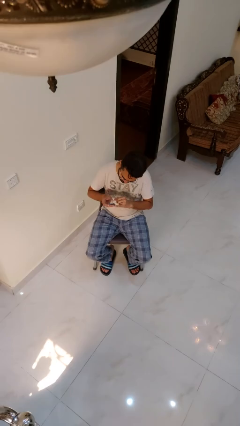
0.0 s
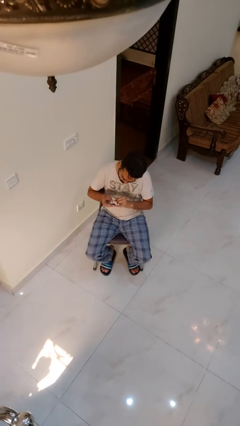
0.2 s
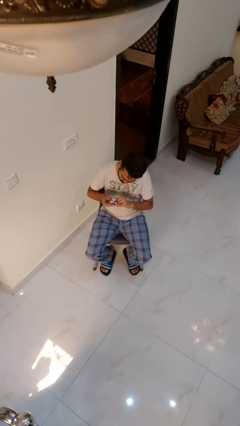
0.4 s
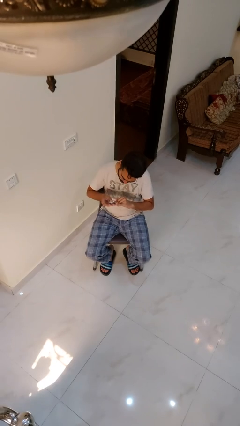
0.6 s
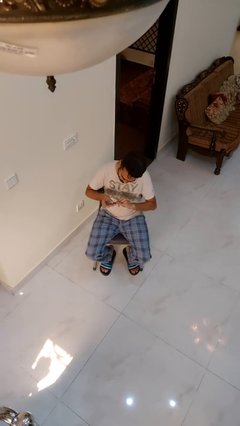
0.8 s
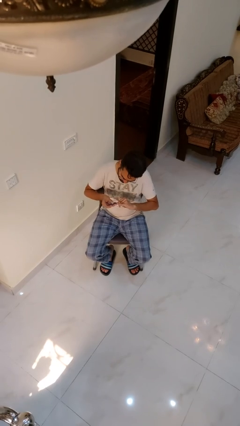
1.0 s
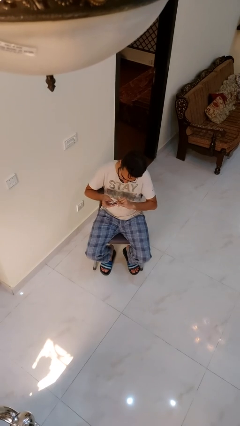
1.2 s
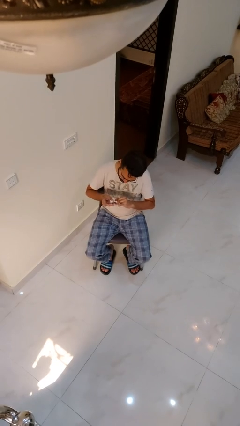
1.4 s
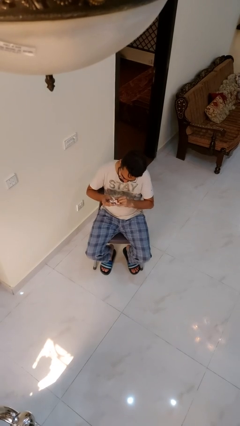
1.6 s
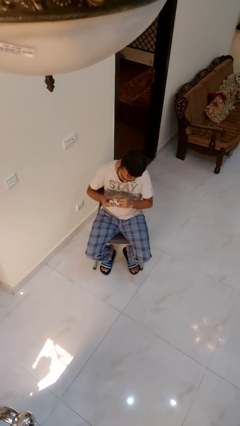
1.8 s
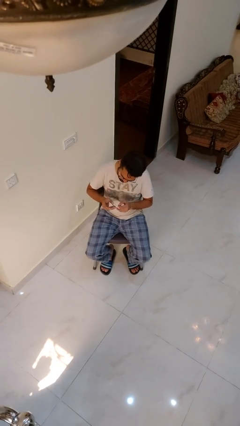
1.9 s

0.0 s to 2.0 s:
person clips fingernails

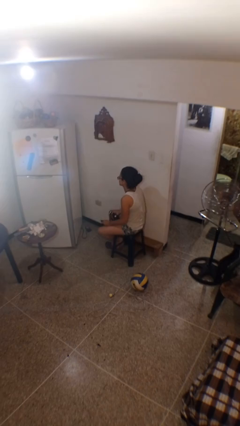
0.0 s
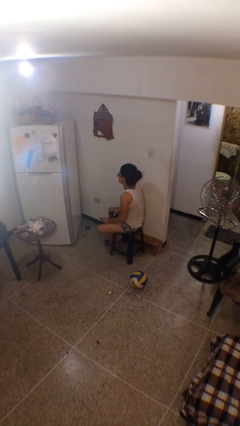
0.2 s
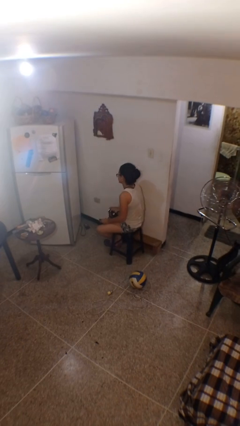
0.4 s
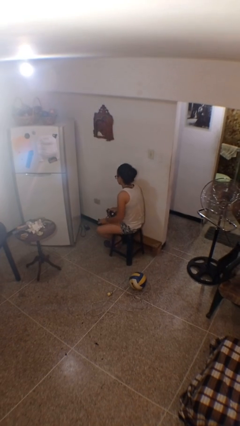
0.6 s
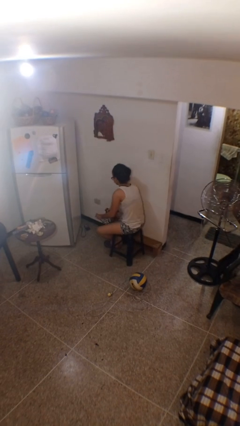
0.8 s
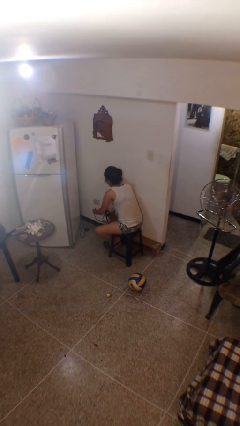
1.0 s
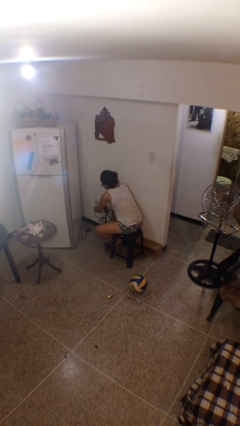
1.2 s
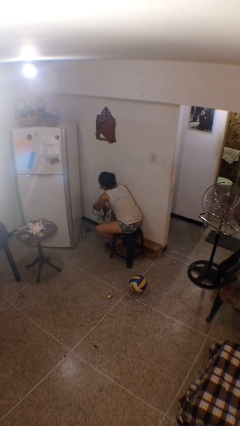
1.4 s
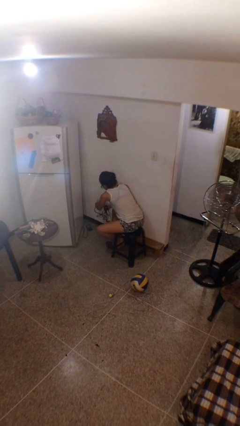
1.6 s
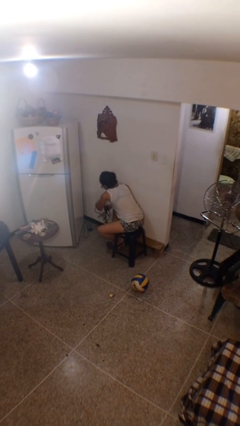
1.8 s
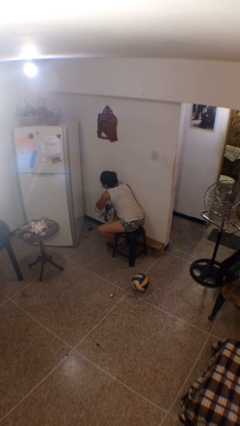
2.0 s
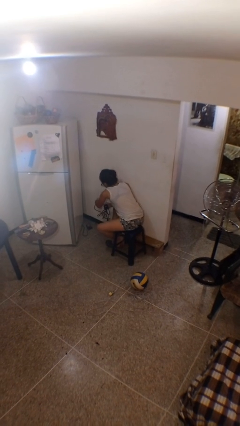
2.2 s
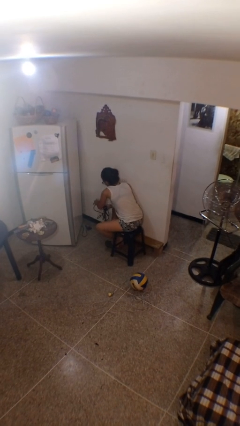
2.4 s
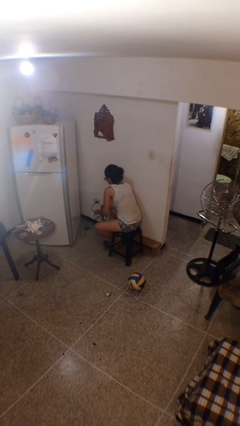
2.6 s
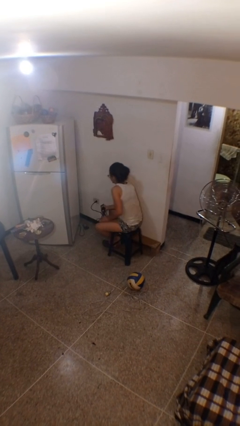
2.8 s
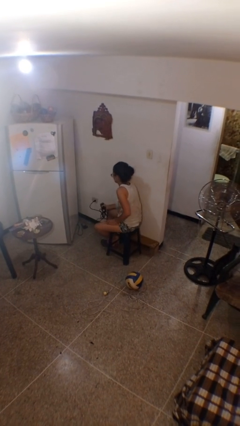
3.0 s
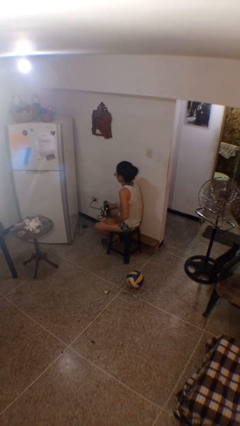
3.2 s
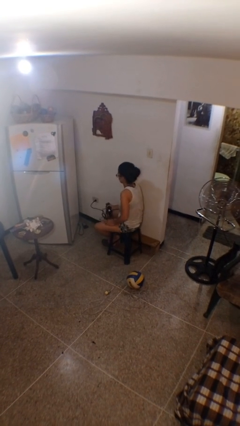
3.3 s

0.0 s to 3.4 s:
person plugs into electrical socket

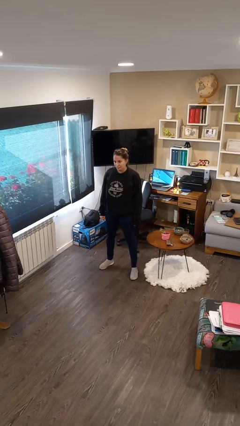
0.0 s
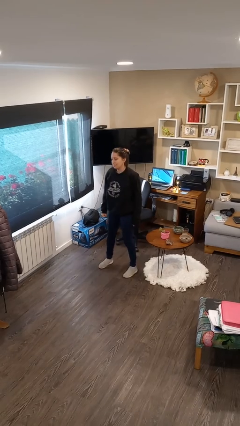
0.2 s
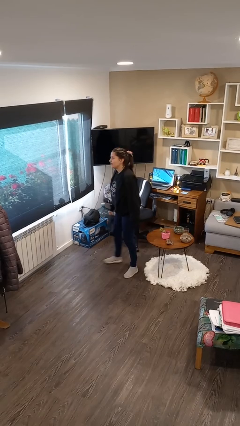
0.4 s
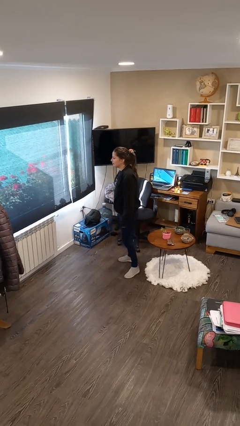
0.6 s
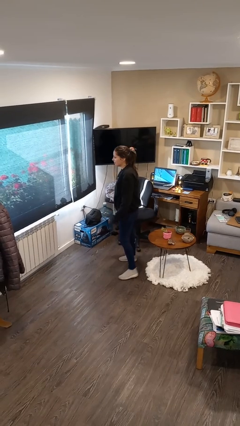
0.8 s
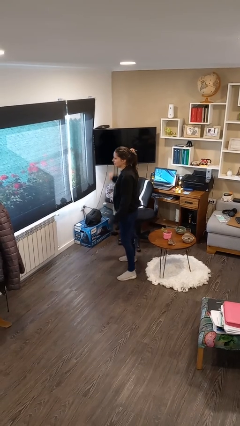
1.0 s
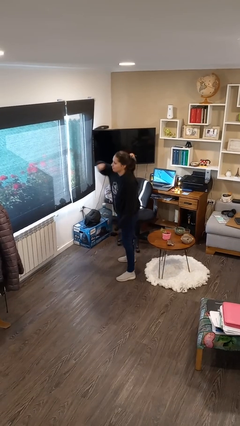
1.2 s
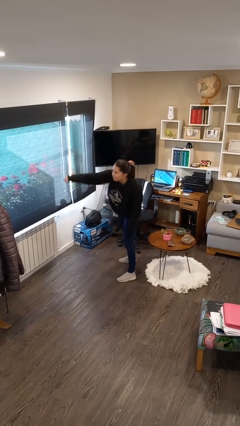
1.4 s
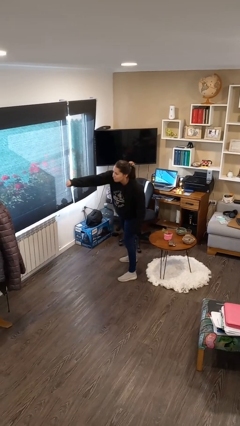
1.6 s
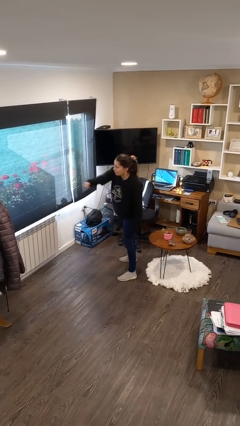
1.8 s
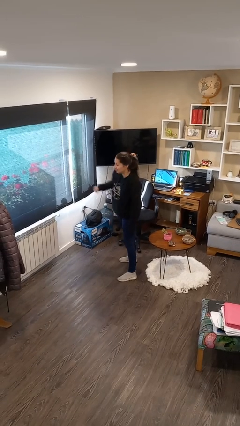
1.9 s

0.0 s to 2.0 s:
person punches

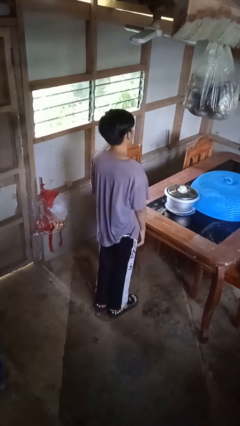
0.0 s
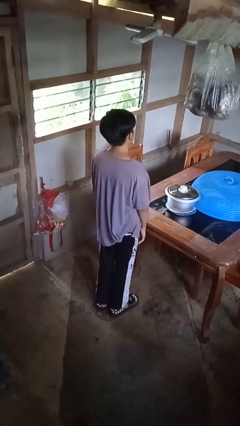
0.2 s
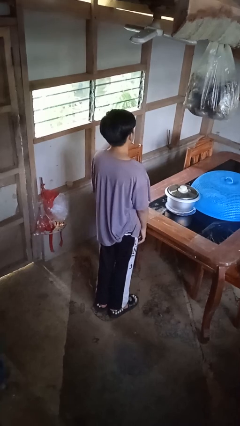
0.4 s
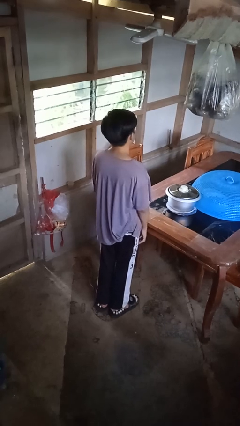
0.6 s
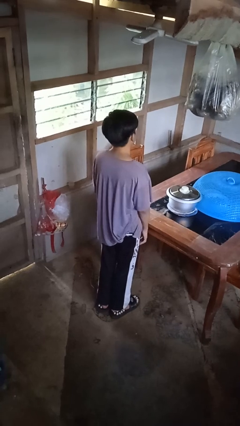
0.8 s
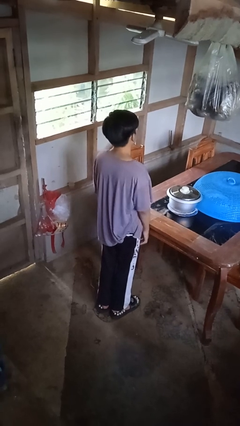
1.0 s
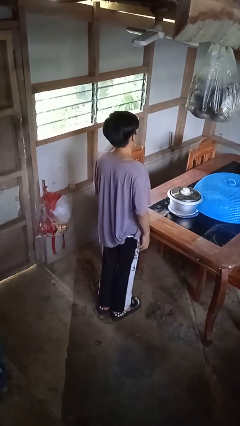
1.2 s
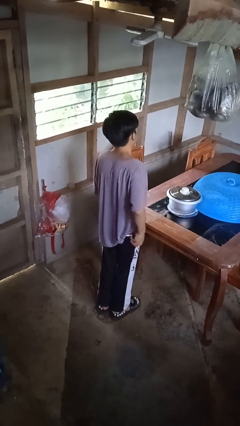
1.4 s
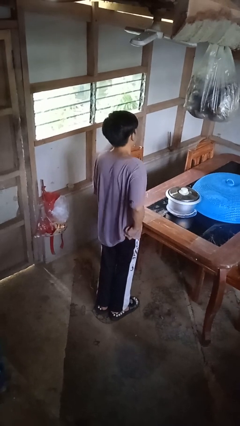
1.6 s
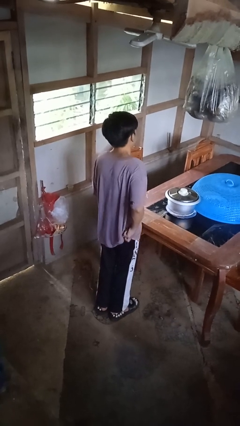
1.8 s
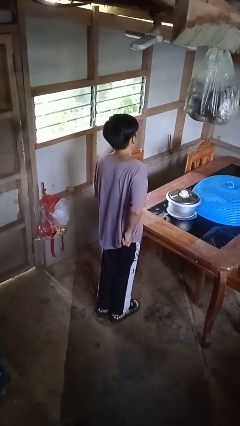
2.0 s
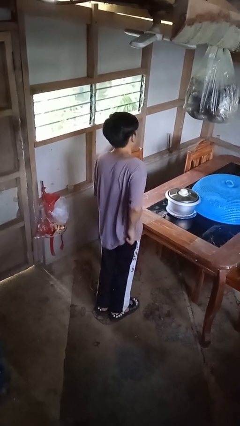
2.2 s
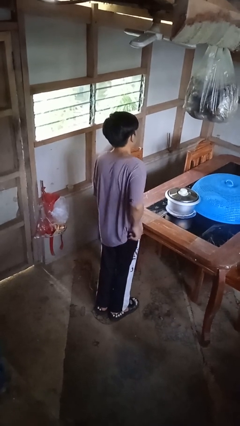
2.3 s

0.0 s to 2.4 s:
person takes phone from pocket

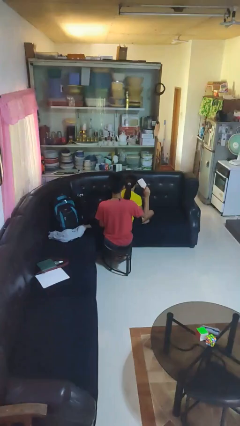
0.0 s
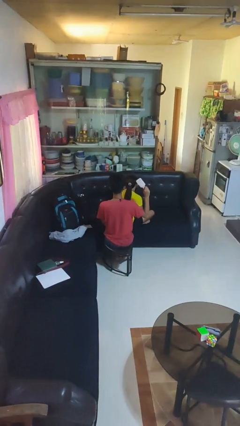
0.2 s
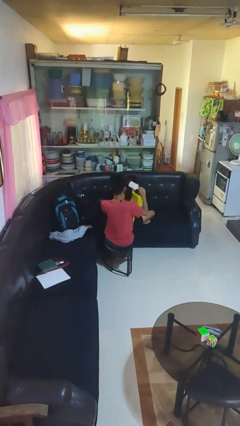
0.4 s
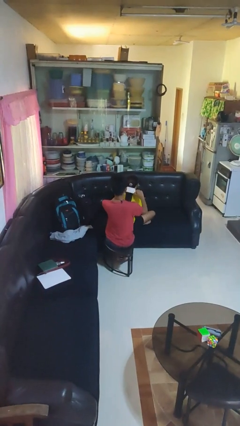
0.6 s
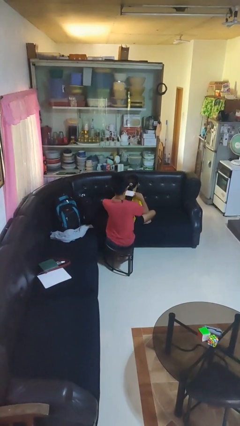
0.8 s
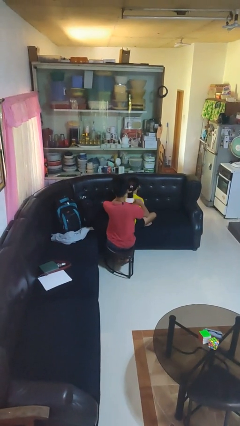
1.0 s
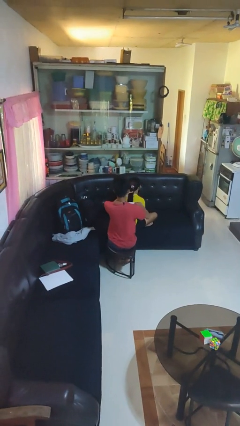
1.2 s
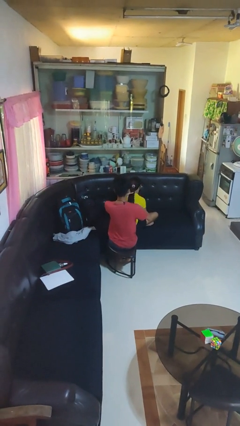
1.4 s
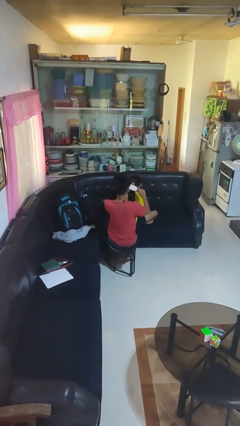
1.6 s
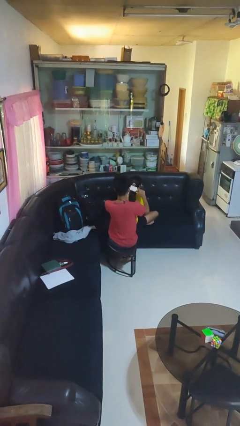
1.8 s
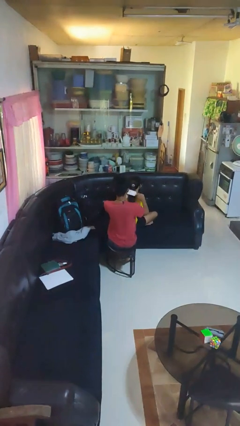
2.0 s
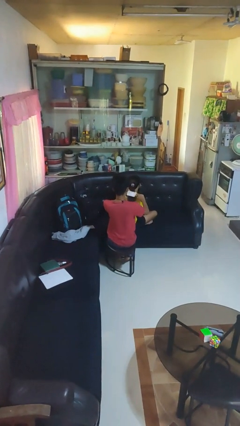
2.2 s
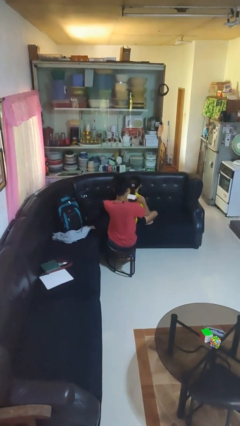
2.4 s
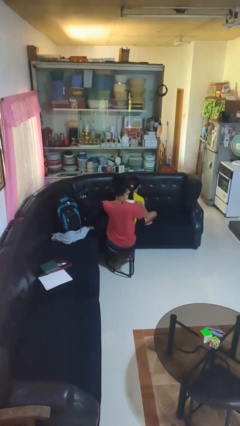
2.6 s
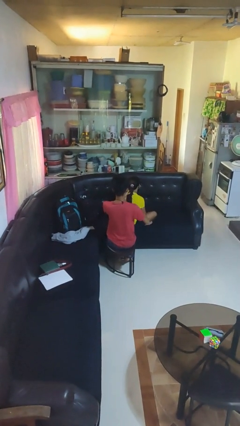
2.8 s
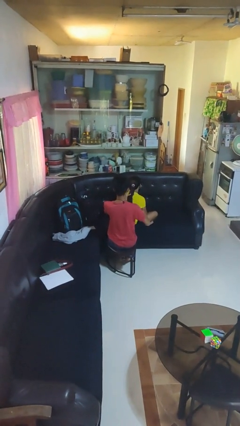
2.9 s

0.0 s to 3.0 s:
person brushes hair of person

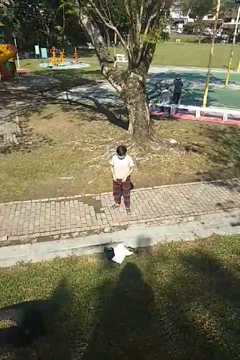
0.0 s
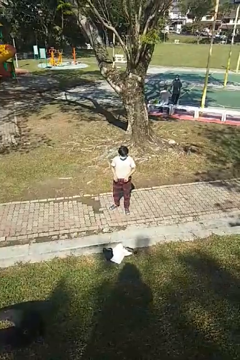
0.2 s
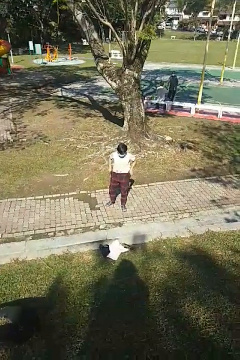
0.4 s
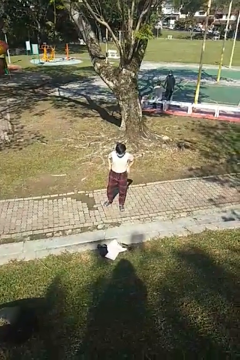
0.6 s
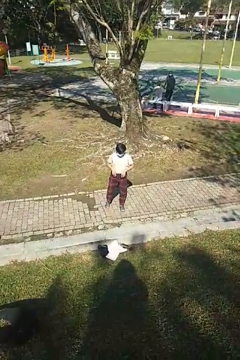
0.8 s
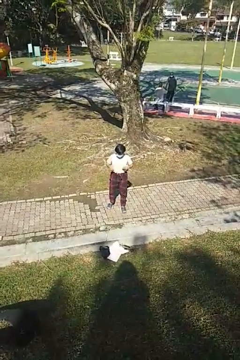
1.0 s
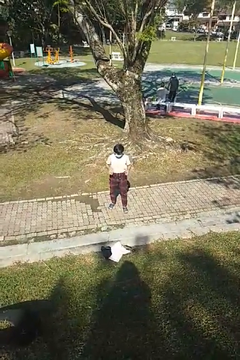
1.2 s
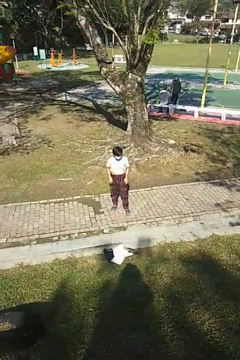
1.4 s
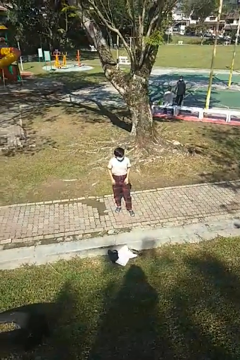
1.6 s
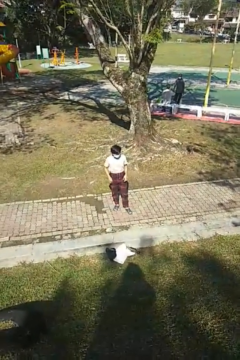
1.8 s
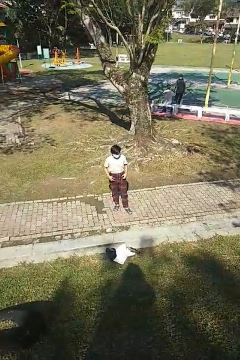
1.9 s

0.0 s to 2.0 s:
person hikes up pants

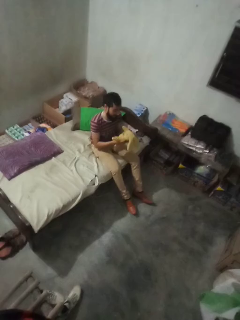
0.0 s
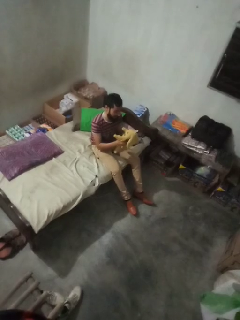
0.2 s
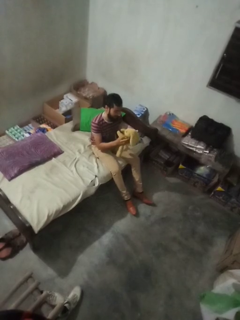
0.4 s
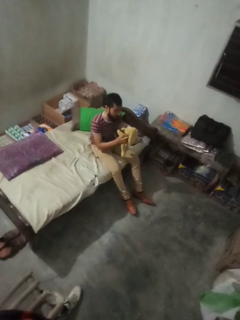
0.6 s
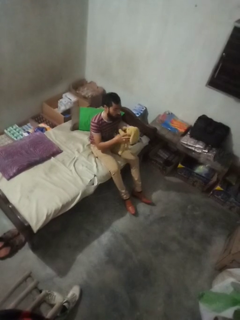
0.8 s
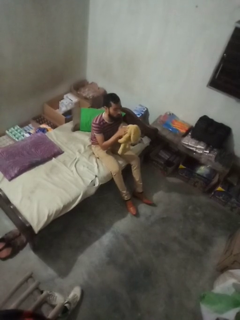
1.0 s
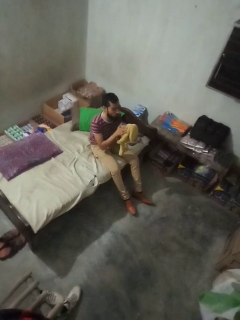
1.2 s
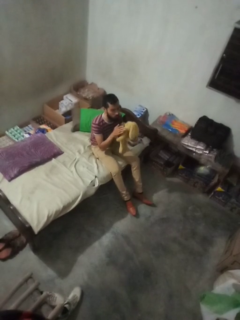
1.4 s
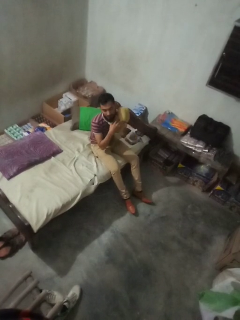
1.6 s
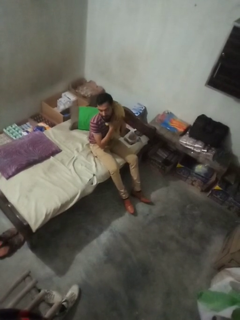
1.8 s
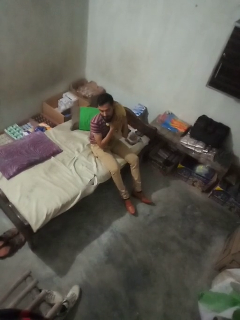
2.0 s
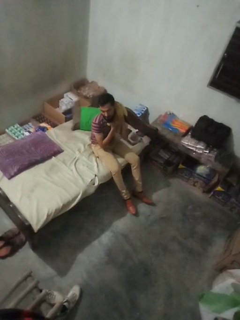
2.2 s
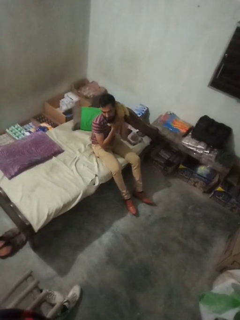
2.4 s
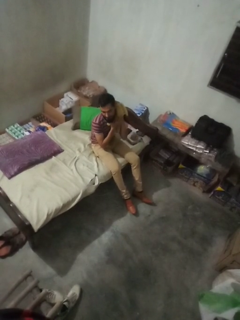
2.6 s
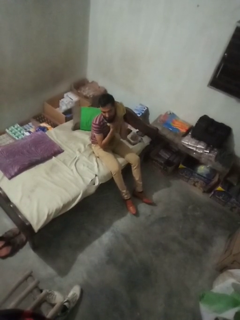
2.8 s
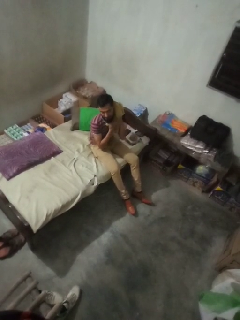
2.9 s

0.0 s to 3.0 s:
person hugs stuffed animal

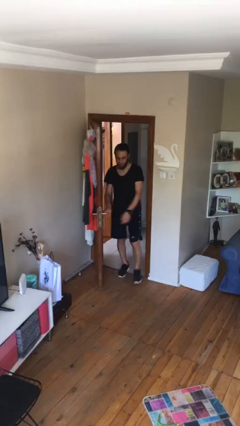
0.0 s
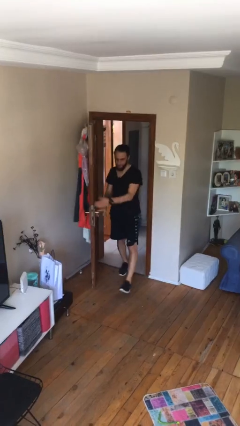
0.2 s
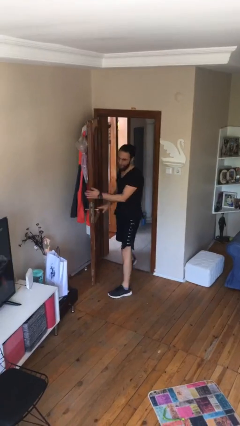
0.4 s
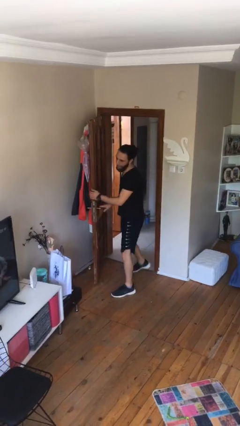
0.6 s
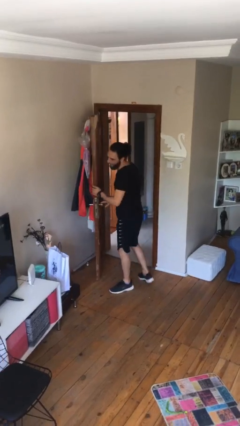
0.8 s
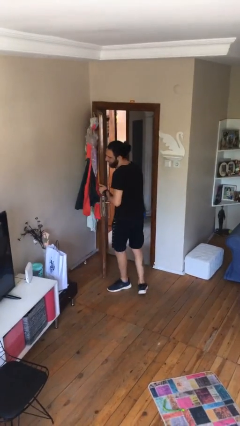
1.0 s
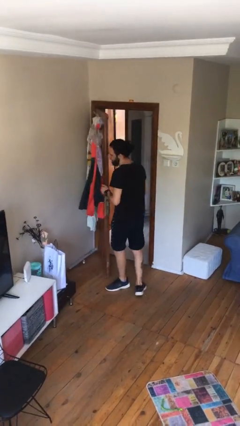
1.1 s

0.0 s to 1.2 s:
person enters scene through structure
